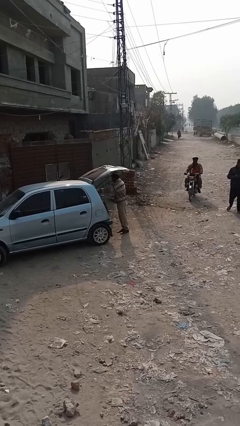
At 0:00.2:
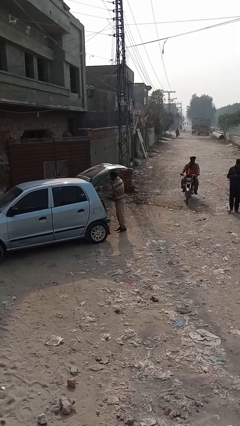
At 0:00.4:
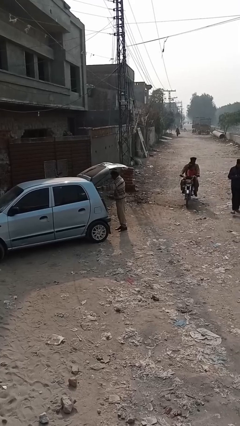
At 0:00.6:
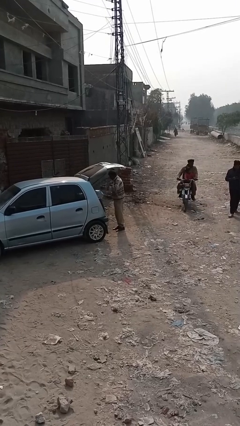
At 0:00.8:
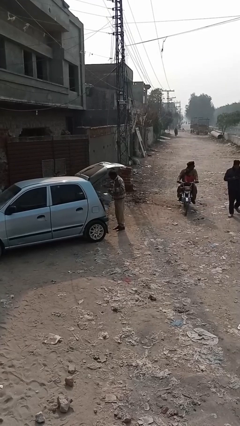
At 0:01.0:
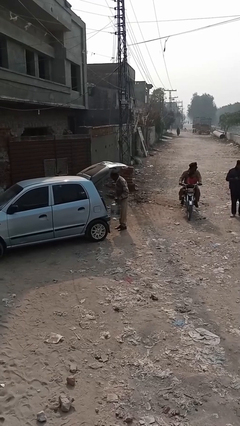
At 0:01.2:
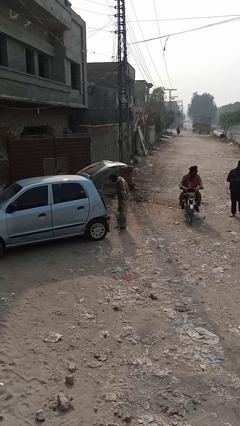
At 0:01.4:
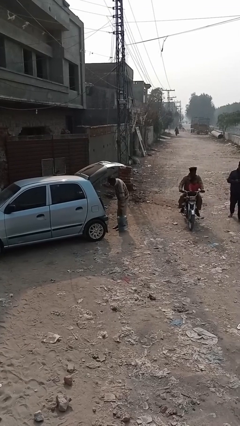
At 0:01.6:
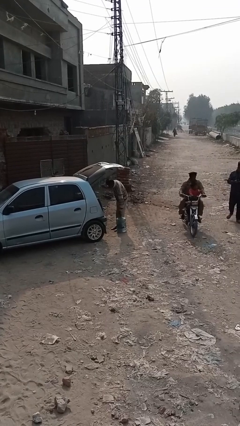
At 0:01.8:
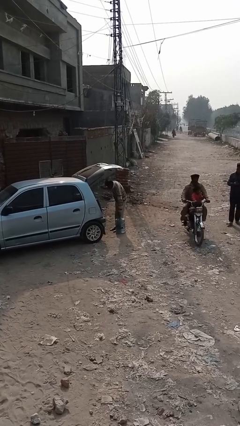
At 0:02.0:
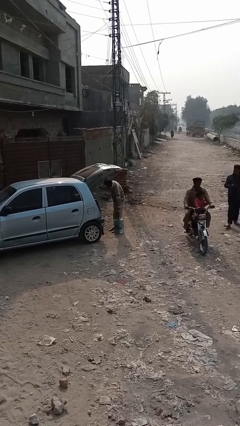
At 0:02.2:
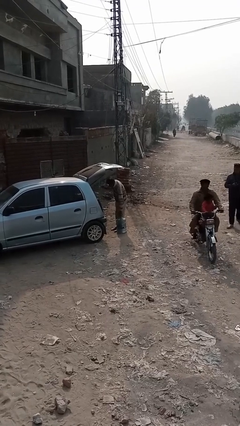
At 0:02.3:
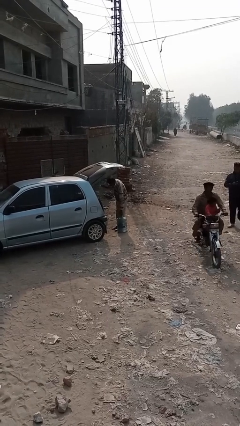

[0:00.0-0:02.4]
person unloads car

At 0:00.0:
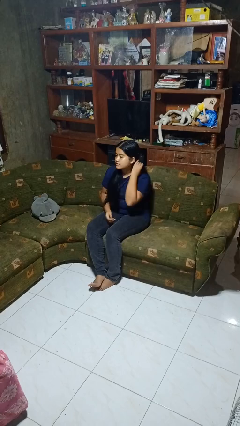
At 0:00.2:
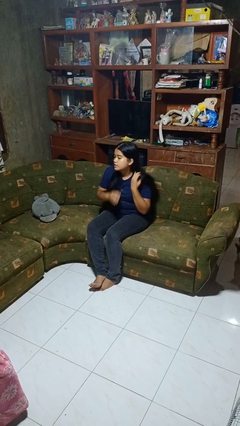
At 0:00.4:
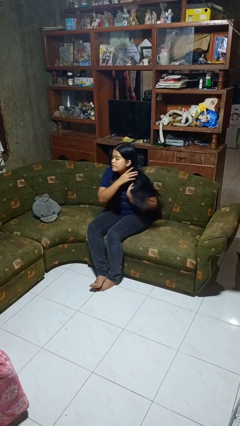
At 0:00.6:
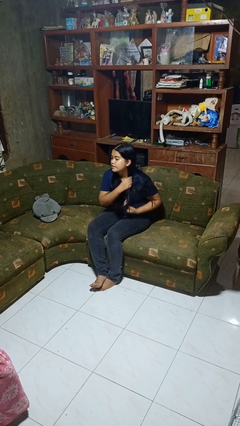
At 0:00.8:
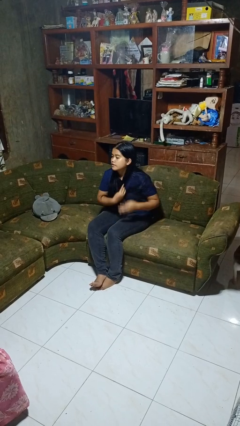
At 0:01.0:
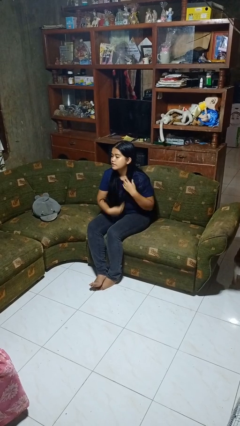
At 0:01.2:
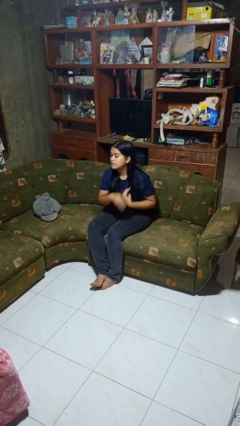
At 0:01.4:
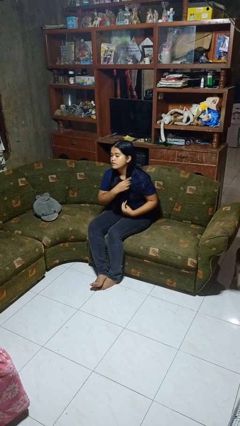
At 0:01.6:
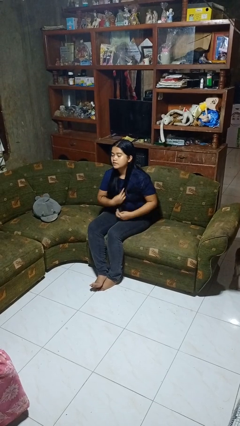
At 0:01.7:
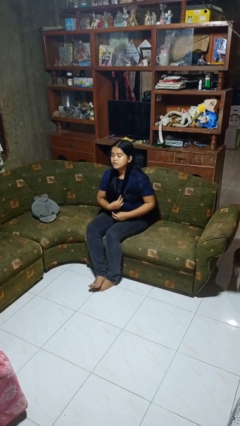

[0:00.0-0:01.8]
person strokes hair

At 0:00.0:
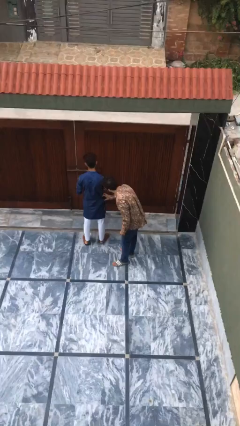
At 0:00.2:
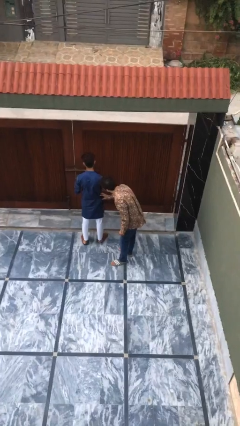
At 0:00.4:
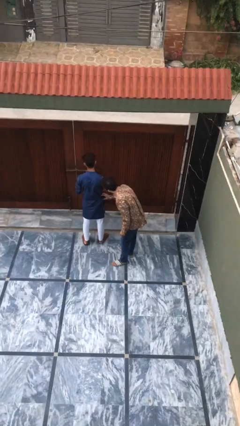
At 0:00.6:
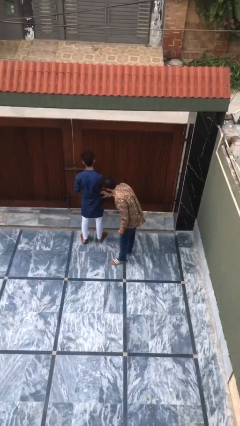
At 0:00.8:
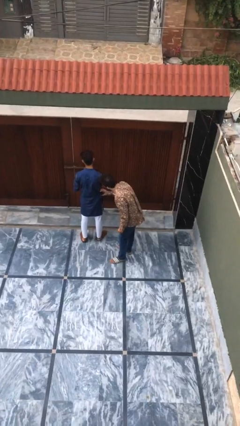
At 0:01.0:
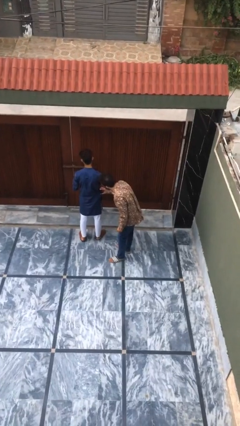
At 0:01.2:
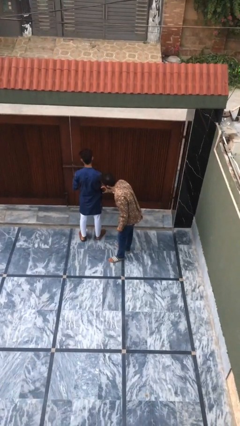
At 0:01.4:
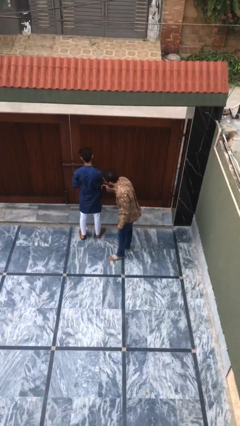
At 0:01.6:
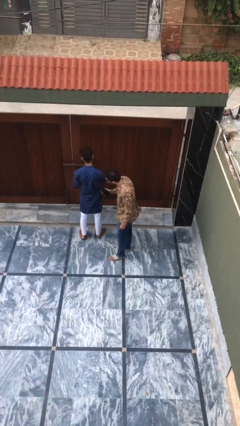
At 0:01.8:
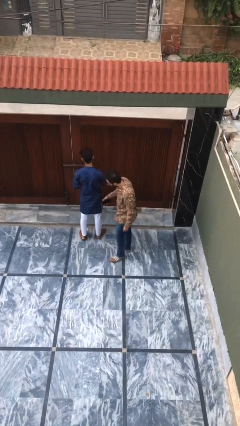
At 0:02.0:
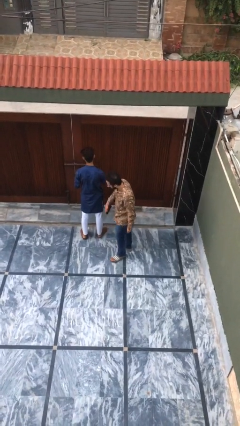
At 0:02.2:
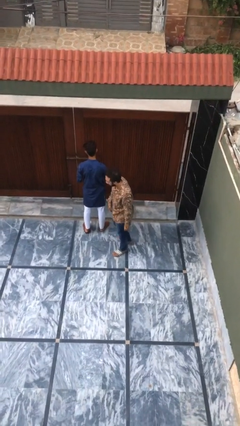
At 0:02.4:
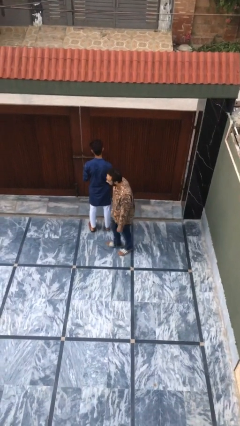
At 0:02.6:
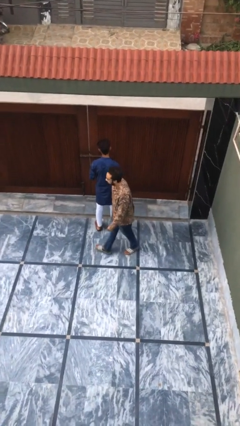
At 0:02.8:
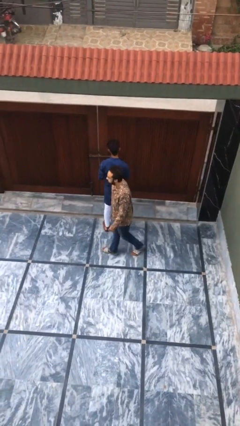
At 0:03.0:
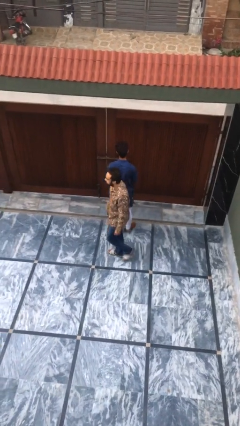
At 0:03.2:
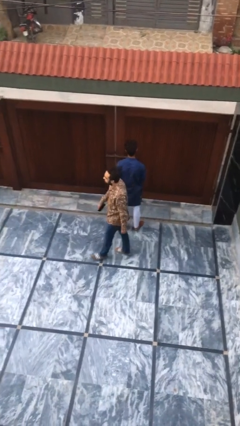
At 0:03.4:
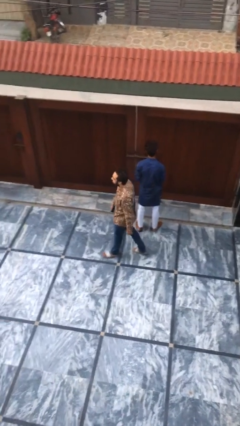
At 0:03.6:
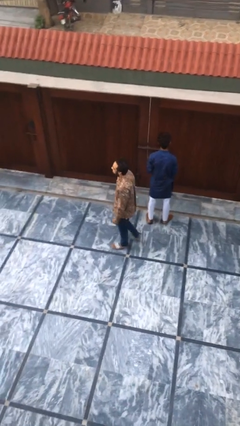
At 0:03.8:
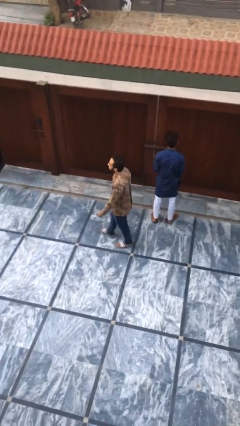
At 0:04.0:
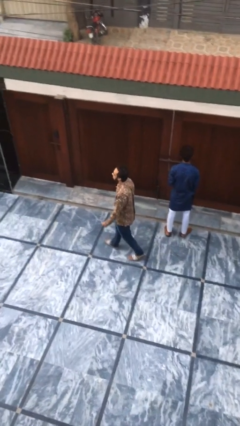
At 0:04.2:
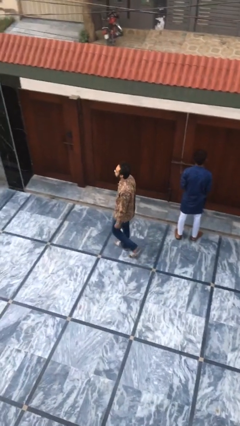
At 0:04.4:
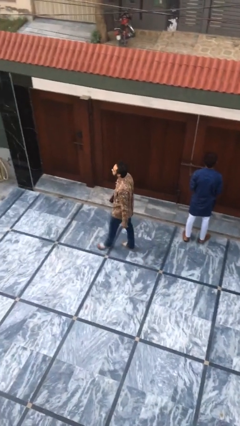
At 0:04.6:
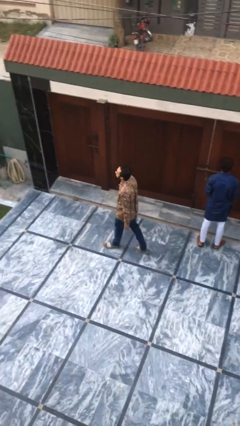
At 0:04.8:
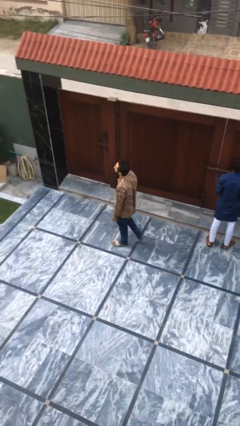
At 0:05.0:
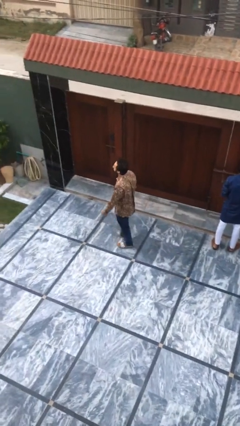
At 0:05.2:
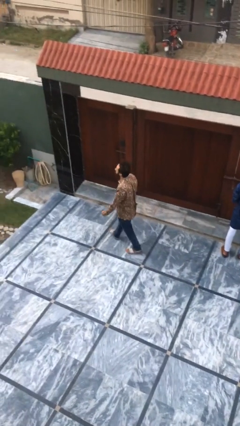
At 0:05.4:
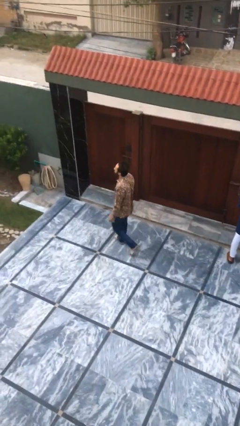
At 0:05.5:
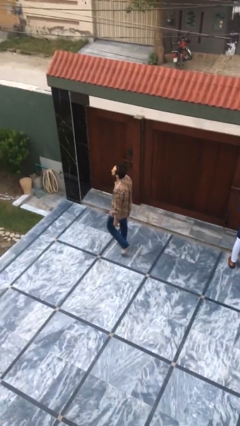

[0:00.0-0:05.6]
person steals object from person

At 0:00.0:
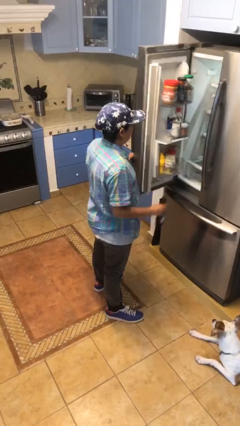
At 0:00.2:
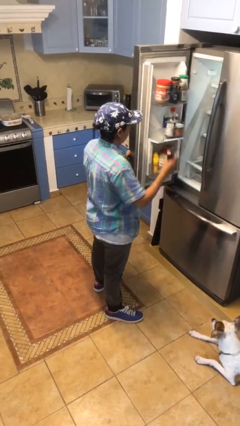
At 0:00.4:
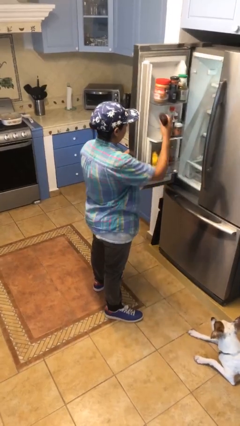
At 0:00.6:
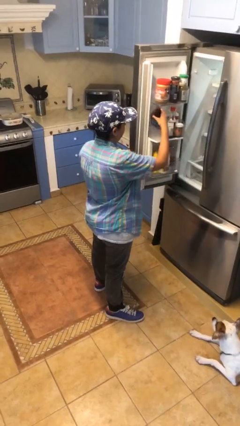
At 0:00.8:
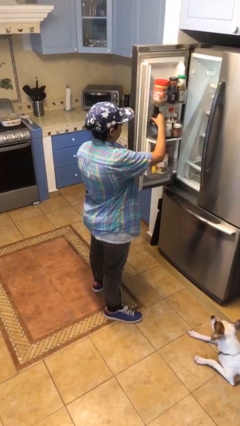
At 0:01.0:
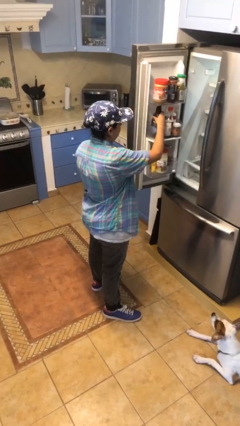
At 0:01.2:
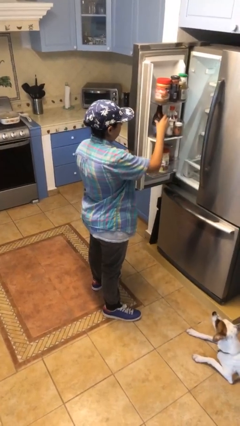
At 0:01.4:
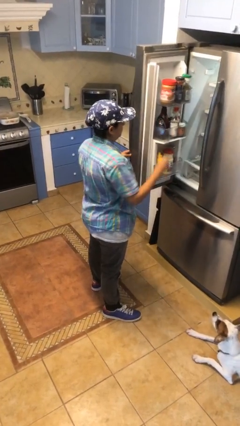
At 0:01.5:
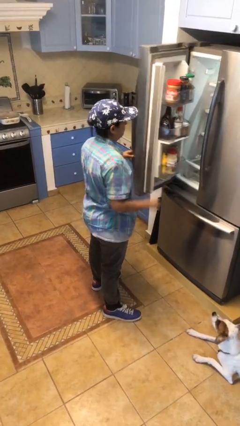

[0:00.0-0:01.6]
person puts object into refrigerator

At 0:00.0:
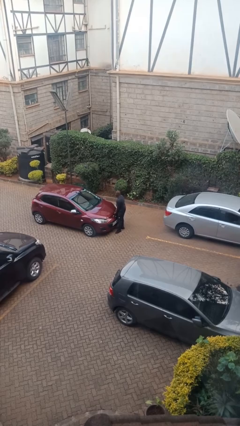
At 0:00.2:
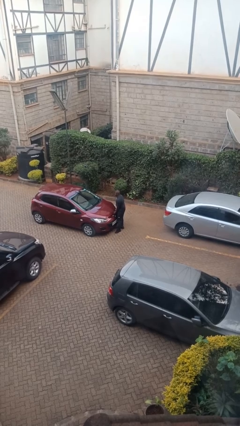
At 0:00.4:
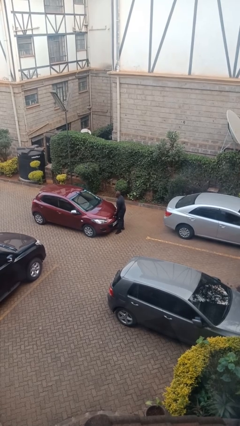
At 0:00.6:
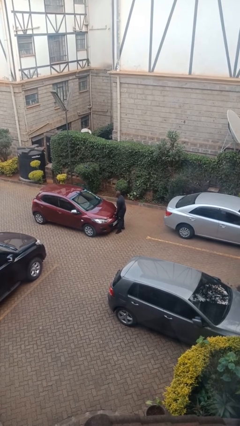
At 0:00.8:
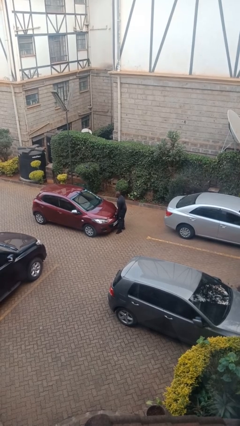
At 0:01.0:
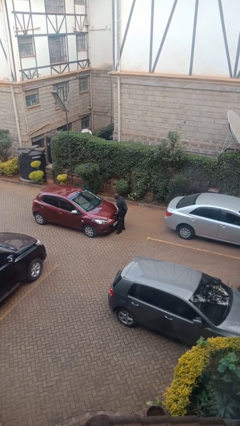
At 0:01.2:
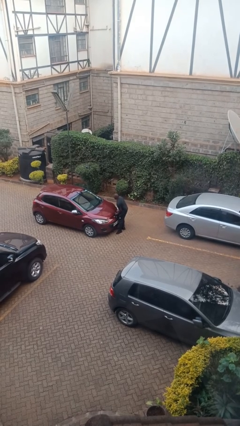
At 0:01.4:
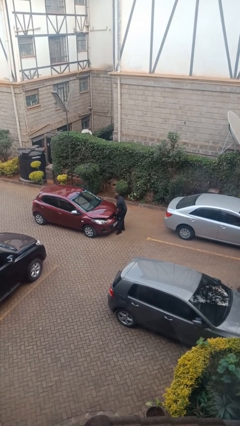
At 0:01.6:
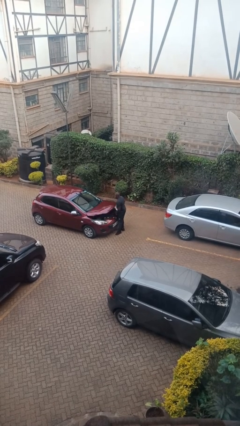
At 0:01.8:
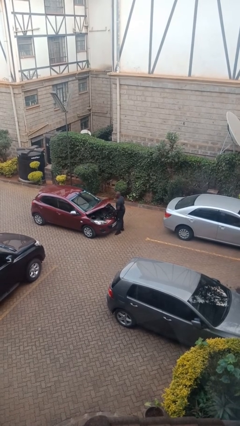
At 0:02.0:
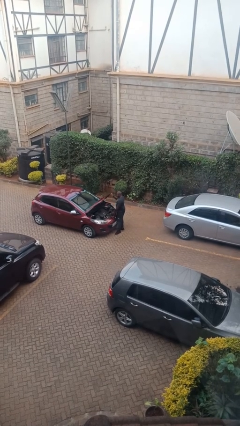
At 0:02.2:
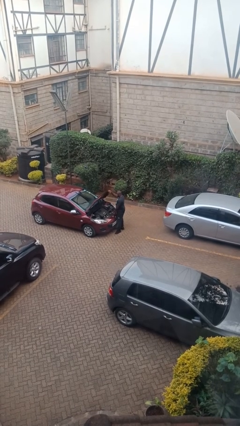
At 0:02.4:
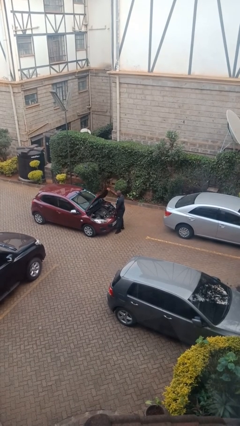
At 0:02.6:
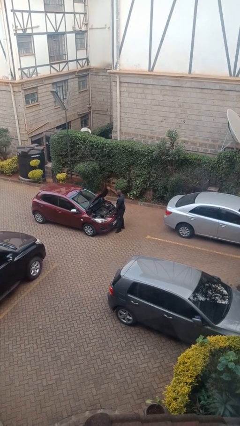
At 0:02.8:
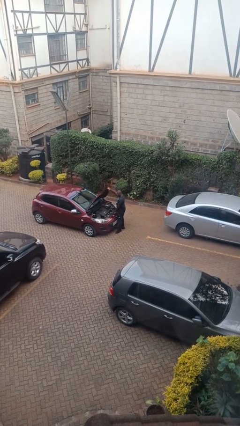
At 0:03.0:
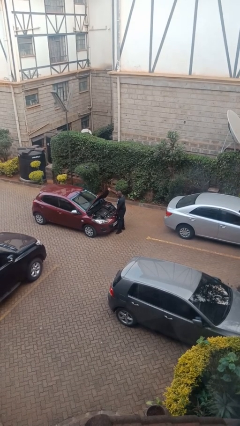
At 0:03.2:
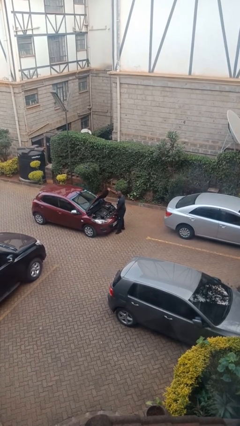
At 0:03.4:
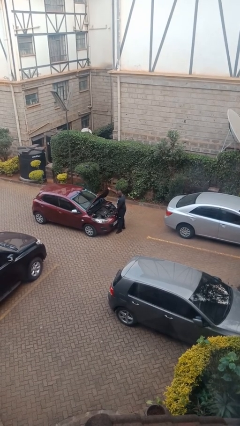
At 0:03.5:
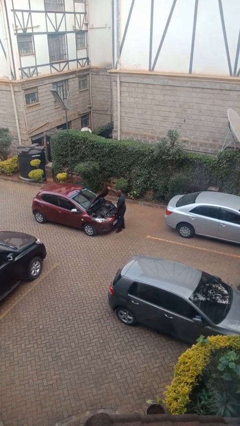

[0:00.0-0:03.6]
person opens car hood

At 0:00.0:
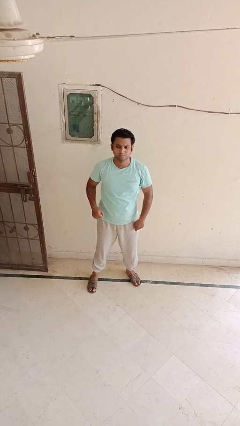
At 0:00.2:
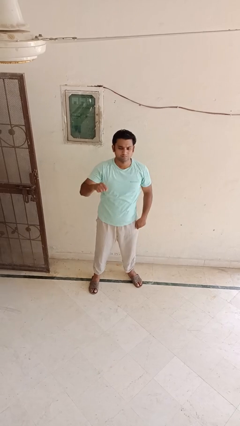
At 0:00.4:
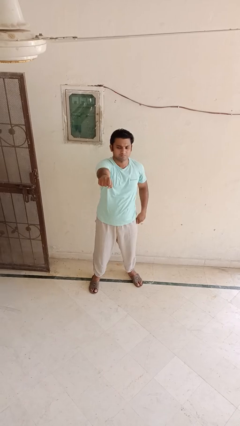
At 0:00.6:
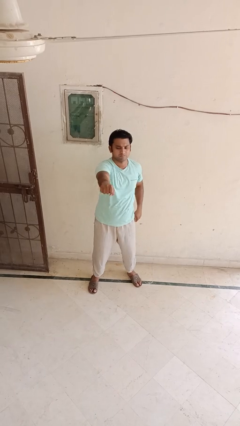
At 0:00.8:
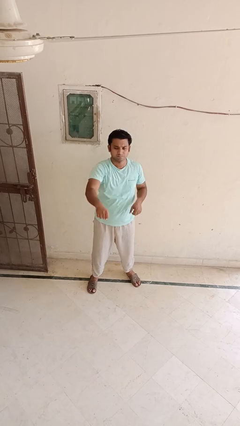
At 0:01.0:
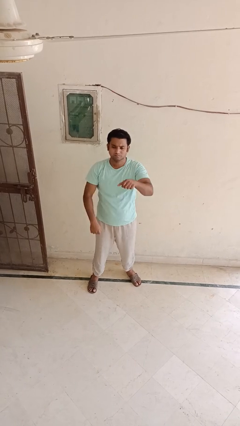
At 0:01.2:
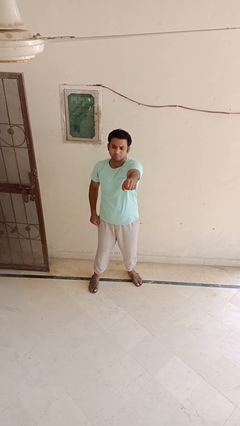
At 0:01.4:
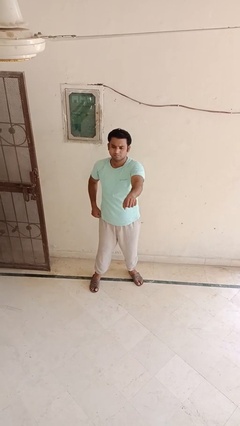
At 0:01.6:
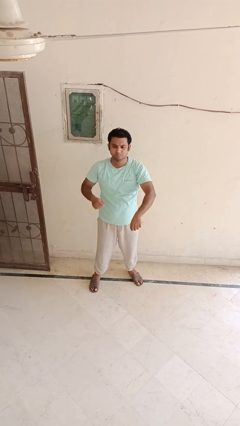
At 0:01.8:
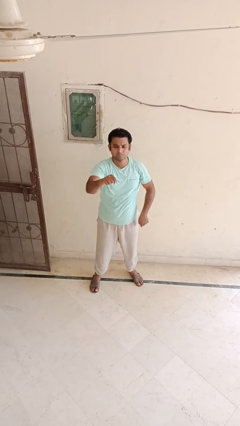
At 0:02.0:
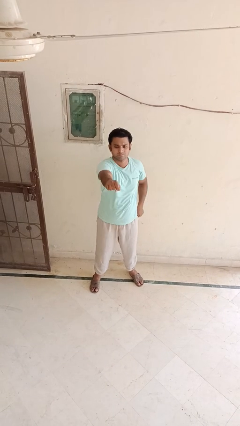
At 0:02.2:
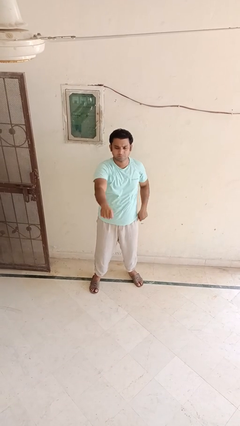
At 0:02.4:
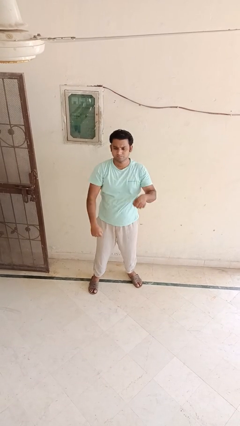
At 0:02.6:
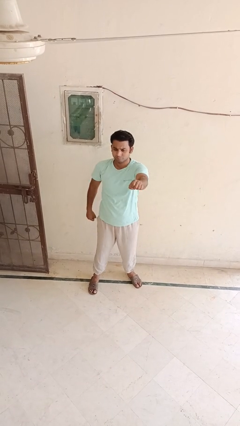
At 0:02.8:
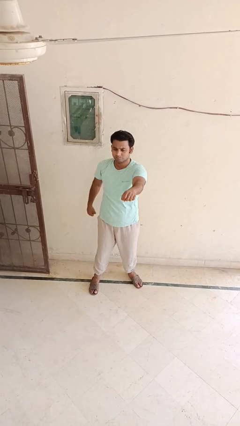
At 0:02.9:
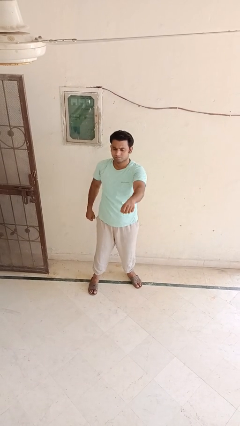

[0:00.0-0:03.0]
person punches
